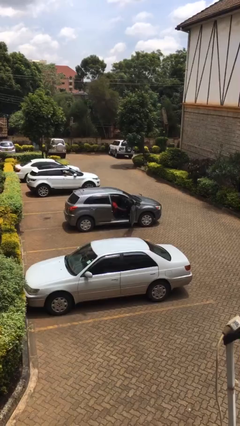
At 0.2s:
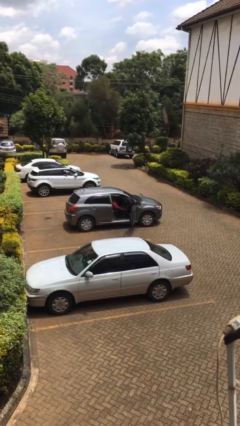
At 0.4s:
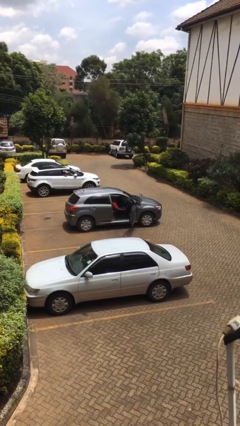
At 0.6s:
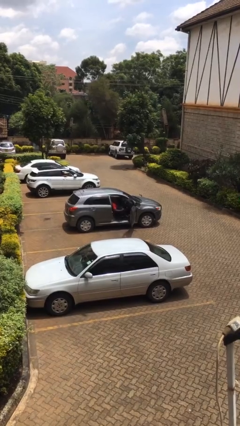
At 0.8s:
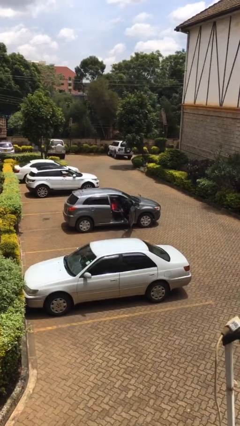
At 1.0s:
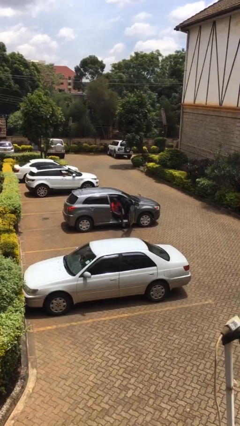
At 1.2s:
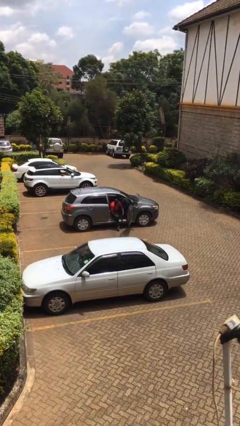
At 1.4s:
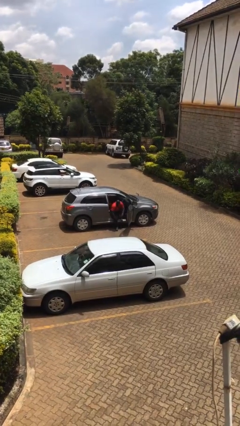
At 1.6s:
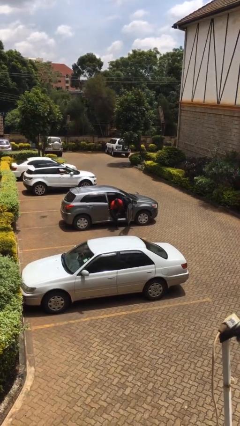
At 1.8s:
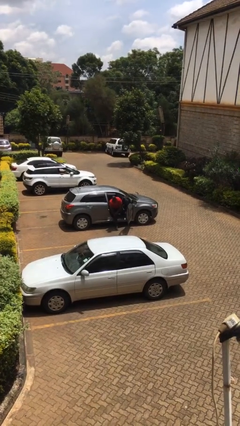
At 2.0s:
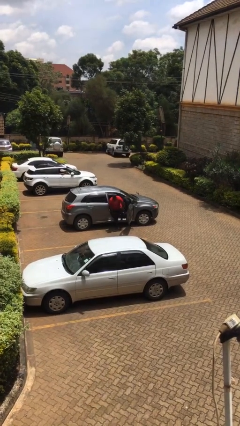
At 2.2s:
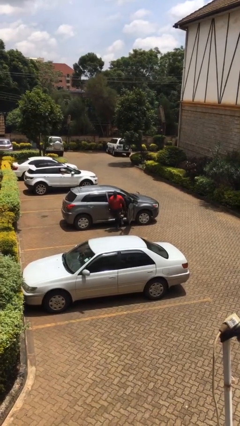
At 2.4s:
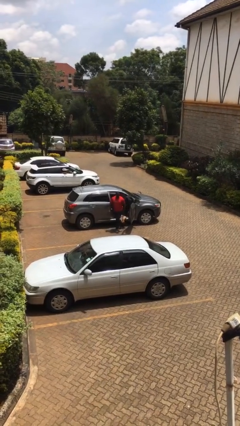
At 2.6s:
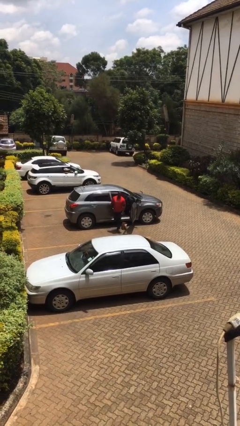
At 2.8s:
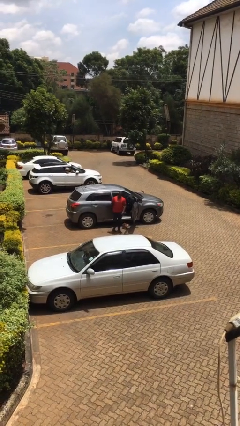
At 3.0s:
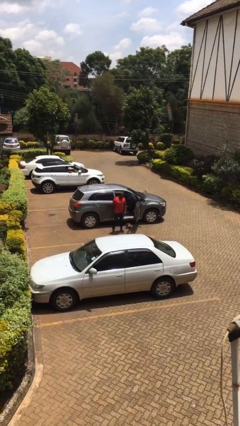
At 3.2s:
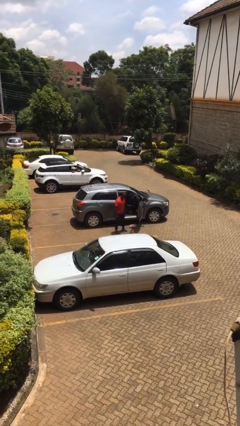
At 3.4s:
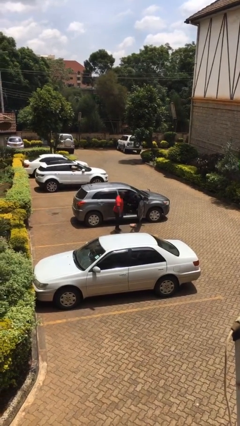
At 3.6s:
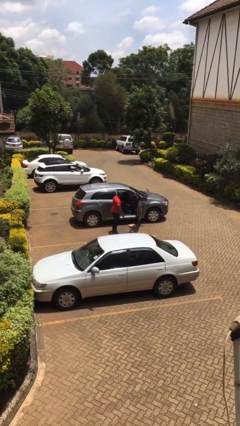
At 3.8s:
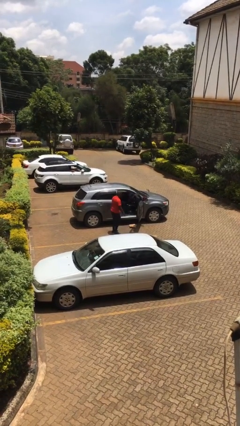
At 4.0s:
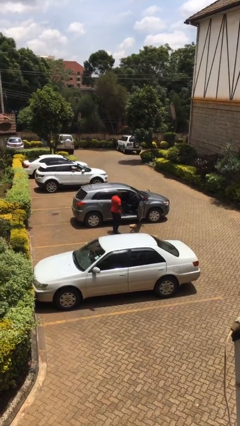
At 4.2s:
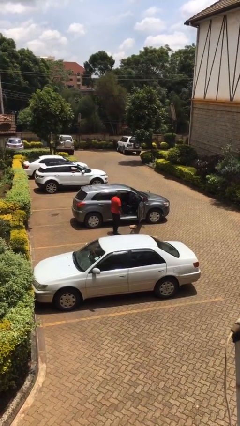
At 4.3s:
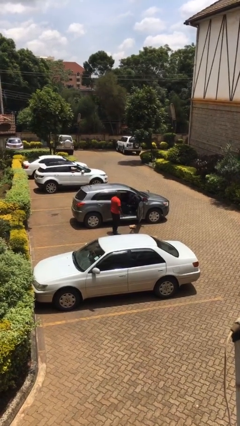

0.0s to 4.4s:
person exits car

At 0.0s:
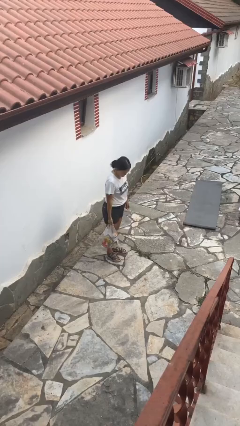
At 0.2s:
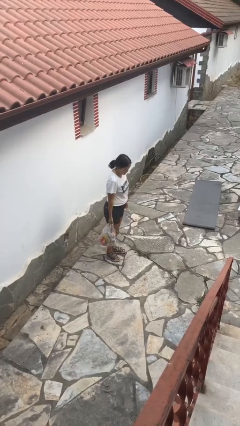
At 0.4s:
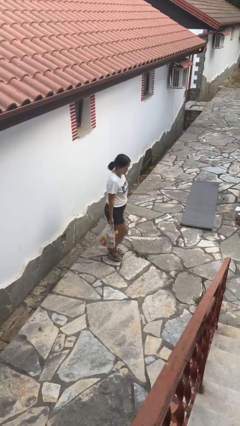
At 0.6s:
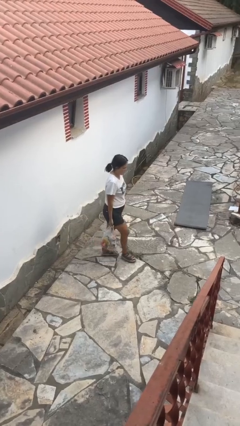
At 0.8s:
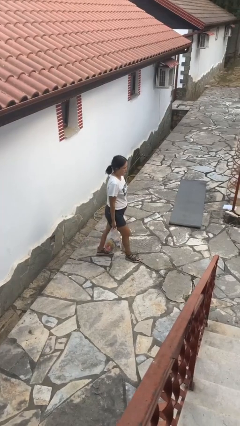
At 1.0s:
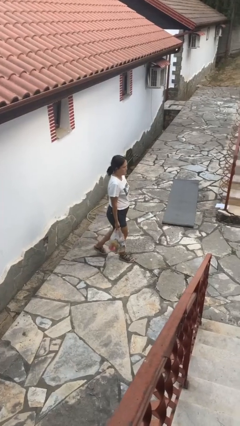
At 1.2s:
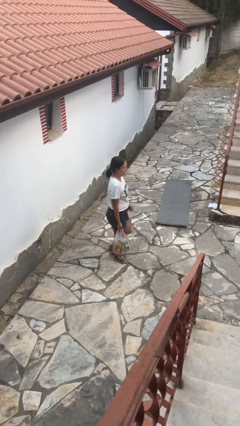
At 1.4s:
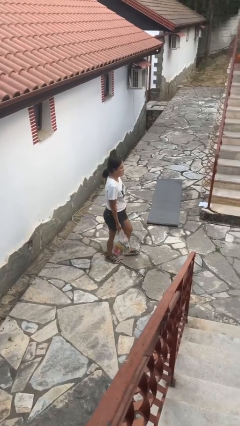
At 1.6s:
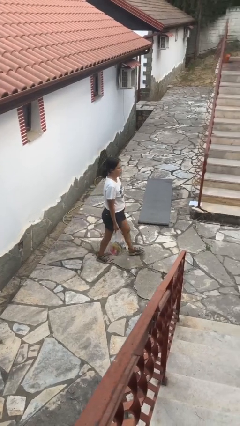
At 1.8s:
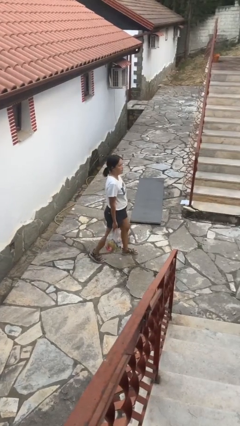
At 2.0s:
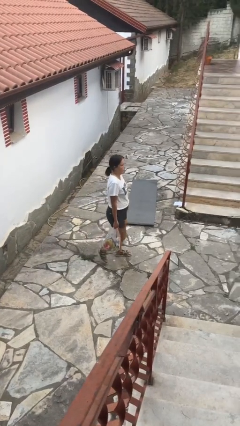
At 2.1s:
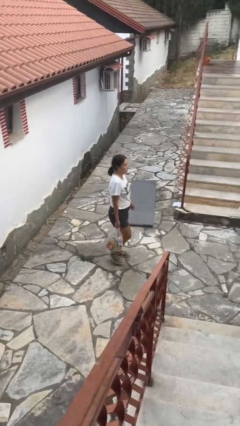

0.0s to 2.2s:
person carries groceries

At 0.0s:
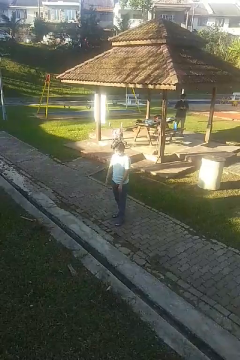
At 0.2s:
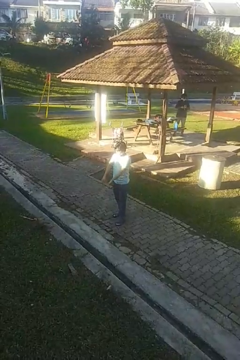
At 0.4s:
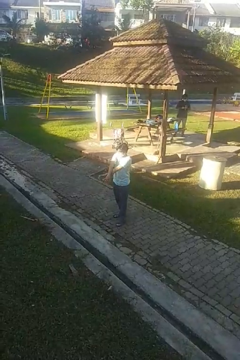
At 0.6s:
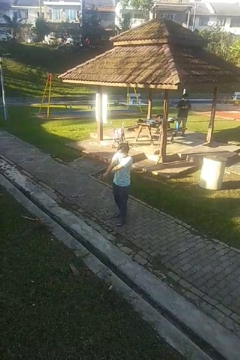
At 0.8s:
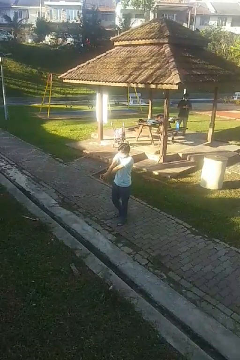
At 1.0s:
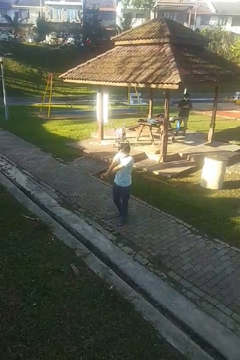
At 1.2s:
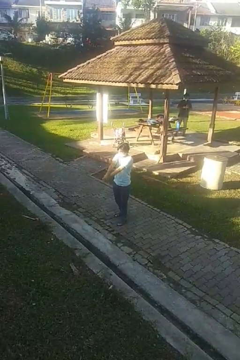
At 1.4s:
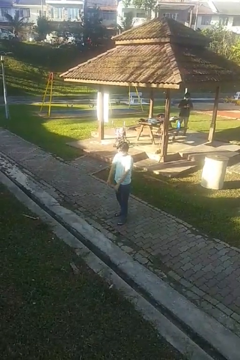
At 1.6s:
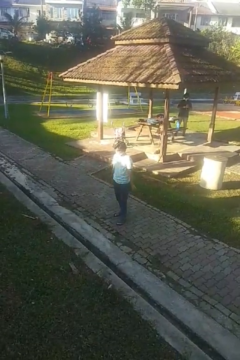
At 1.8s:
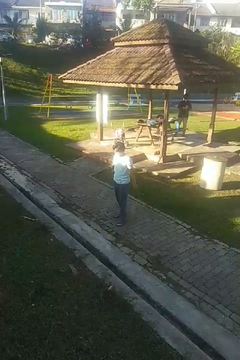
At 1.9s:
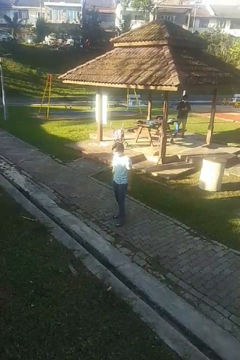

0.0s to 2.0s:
person crosses arms

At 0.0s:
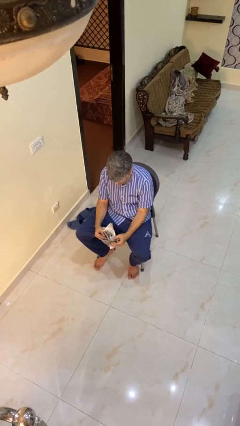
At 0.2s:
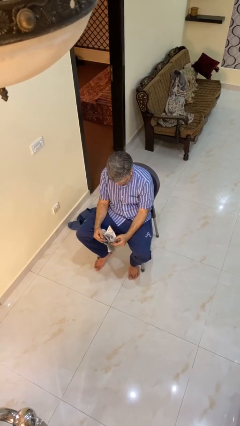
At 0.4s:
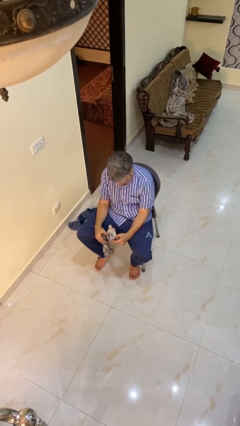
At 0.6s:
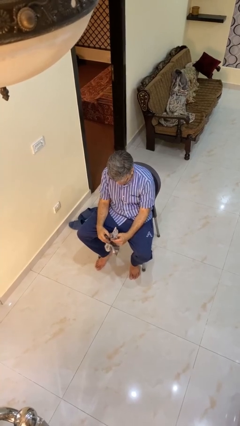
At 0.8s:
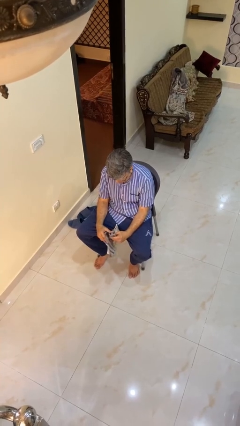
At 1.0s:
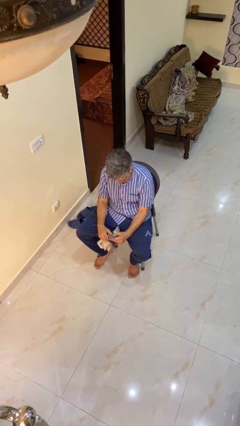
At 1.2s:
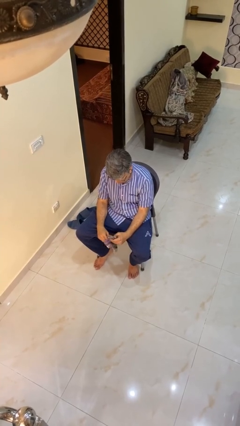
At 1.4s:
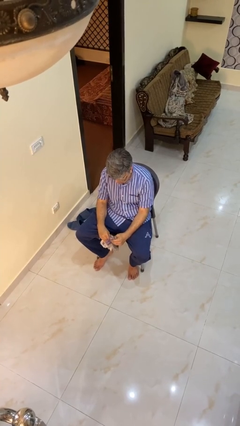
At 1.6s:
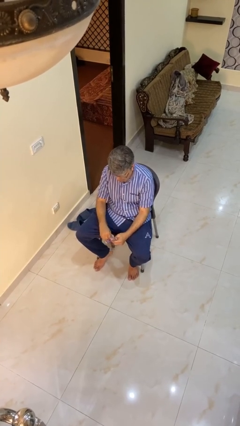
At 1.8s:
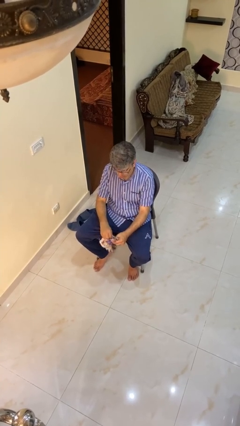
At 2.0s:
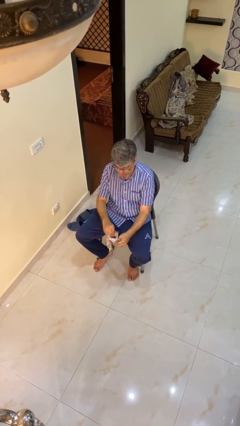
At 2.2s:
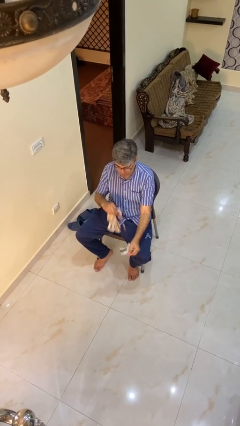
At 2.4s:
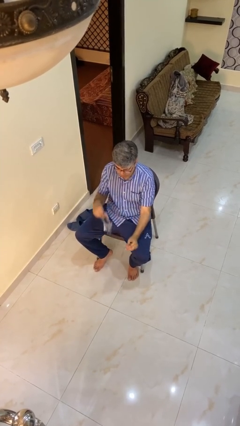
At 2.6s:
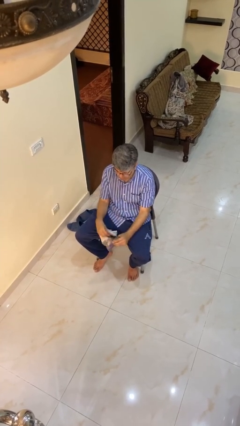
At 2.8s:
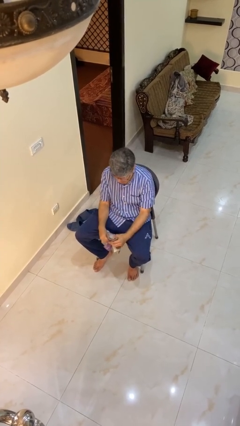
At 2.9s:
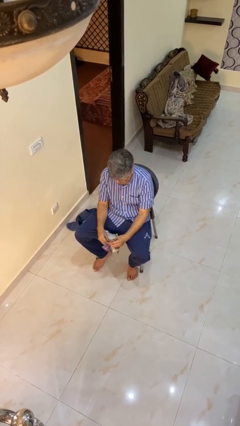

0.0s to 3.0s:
person tears paper

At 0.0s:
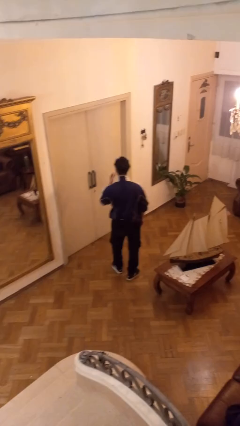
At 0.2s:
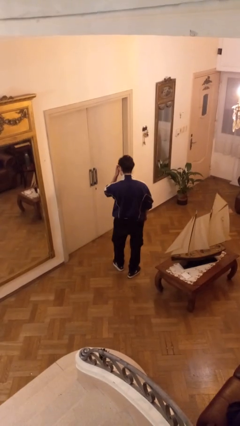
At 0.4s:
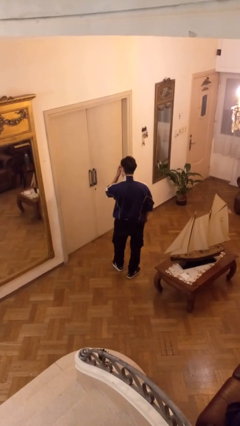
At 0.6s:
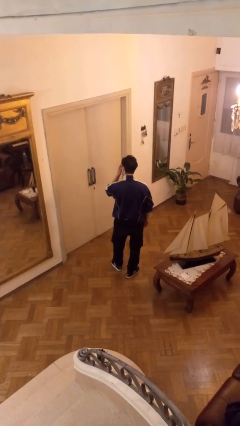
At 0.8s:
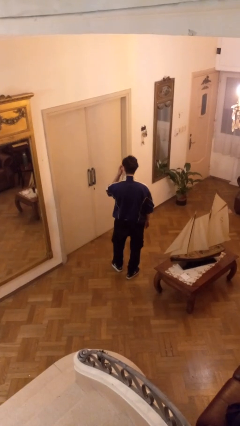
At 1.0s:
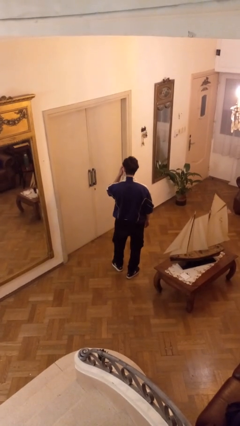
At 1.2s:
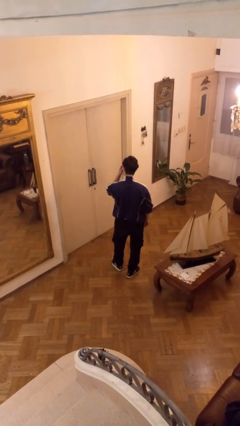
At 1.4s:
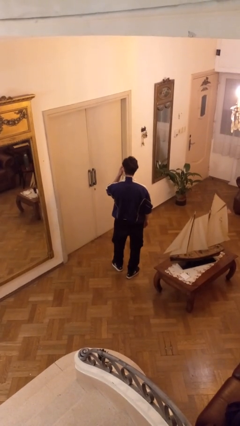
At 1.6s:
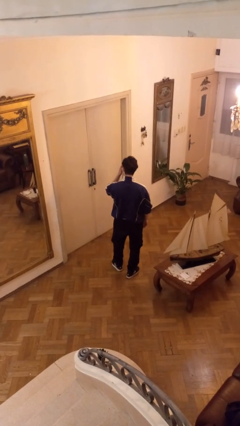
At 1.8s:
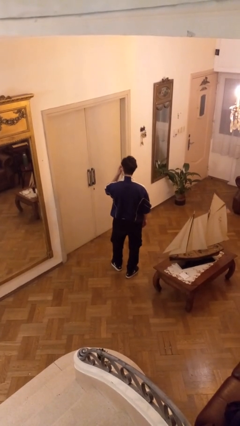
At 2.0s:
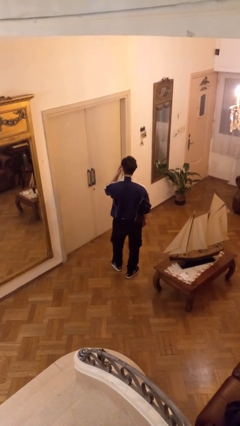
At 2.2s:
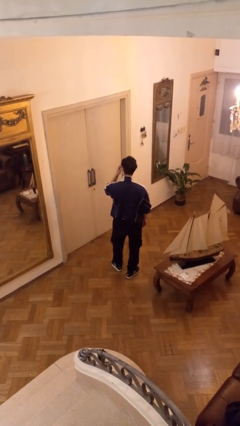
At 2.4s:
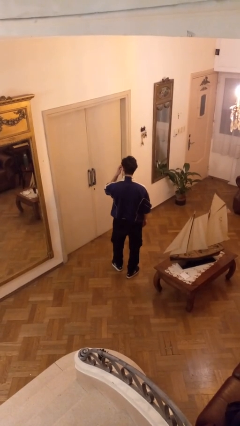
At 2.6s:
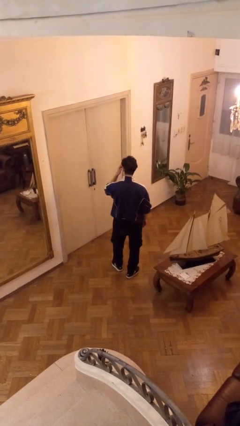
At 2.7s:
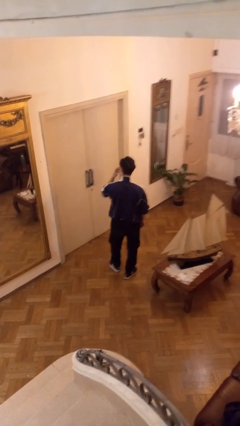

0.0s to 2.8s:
person scratches face

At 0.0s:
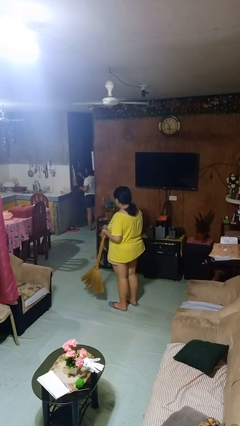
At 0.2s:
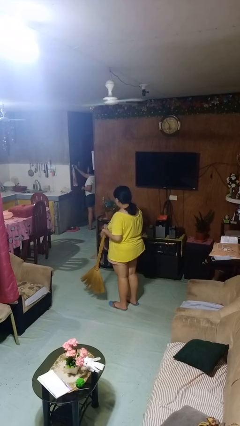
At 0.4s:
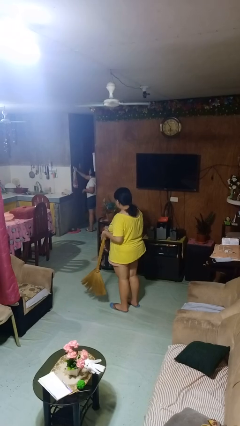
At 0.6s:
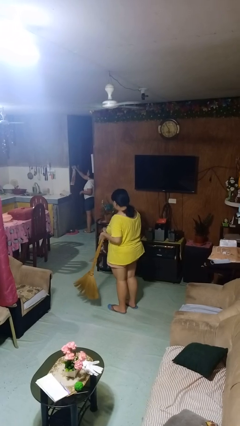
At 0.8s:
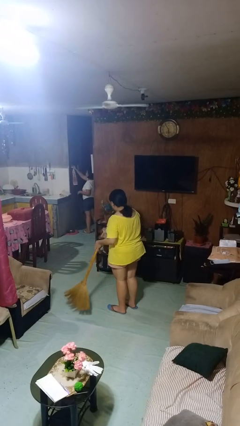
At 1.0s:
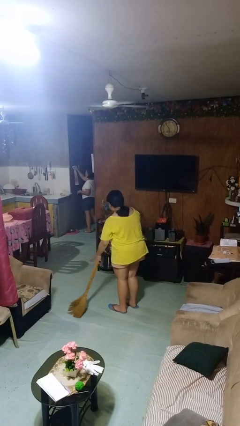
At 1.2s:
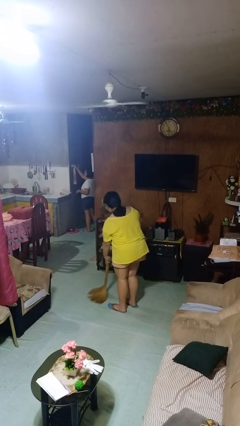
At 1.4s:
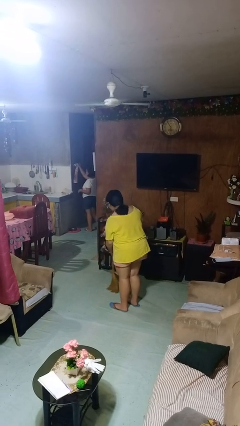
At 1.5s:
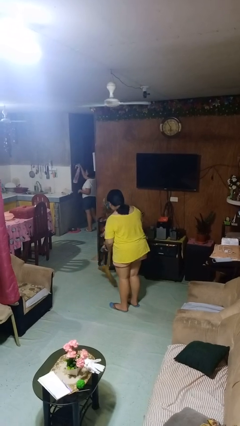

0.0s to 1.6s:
person sweeps floor

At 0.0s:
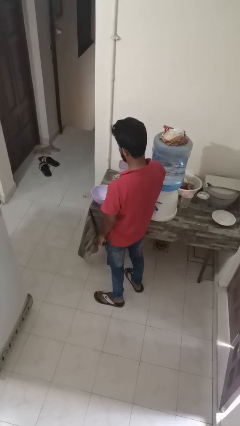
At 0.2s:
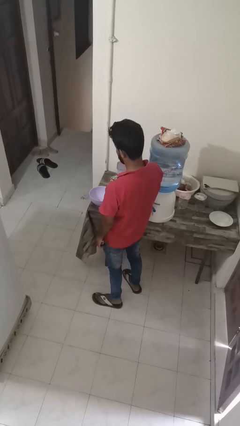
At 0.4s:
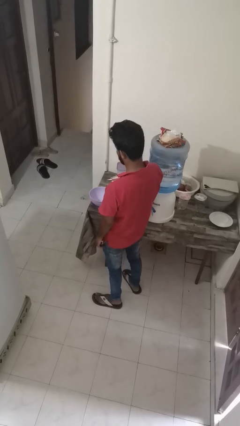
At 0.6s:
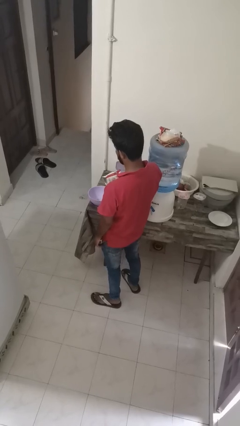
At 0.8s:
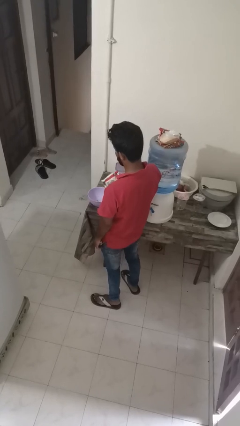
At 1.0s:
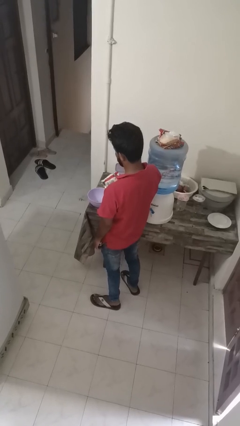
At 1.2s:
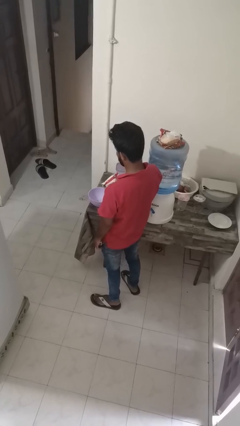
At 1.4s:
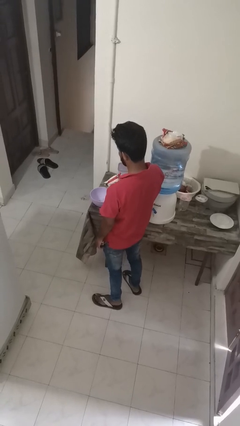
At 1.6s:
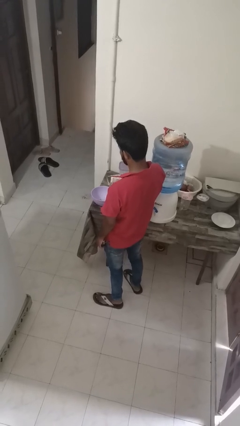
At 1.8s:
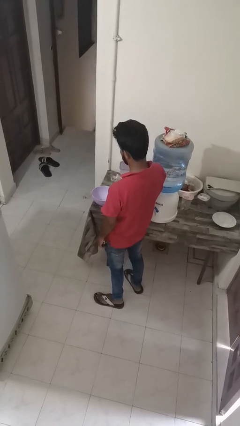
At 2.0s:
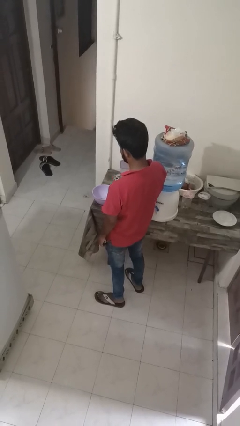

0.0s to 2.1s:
person pours into bowl
